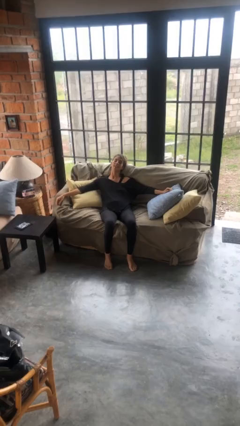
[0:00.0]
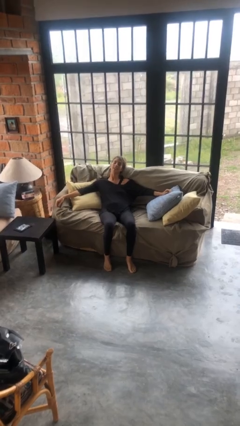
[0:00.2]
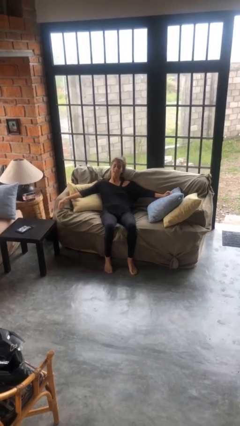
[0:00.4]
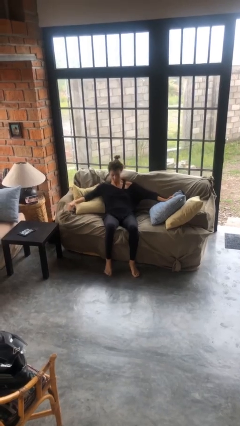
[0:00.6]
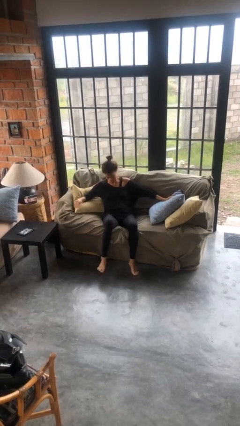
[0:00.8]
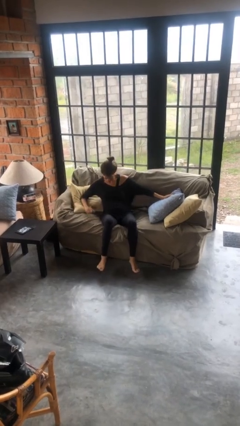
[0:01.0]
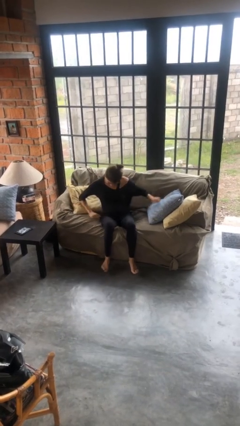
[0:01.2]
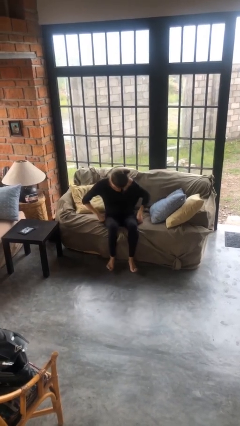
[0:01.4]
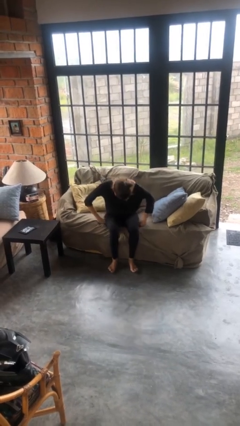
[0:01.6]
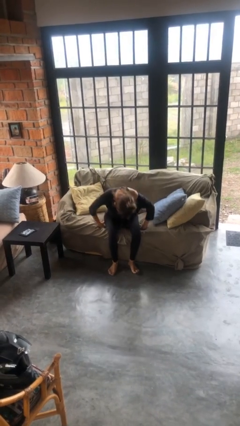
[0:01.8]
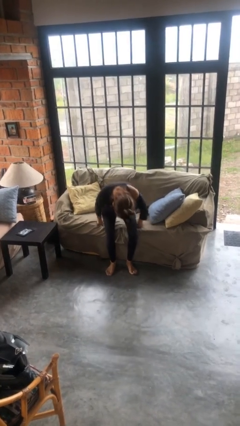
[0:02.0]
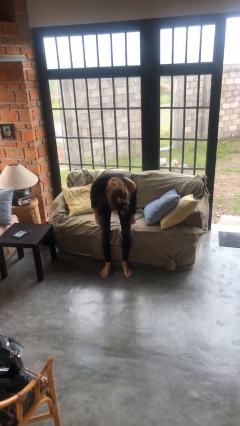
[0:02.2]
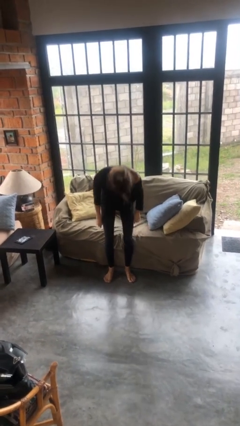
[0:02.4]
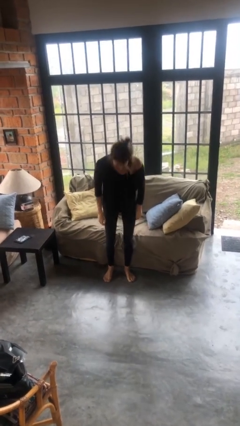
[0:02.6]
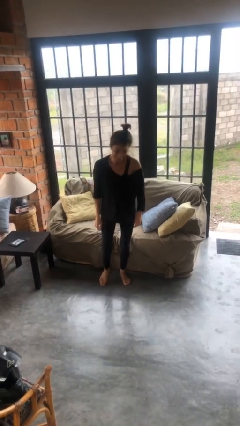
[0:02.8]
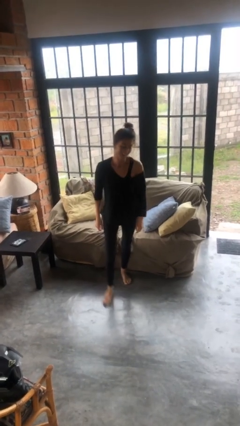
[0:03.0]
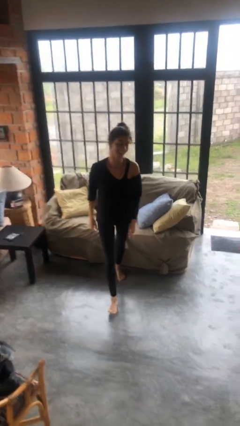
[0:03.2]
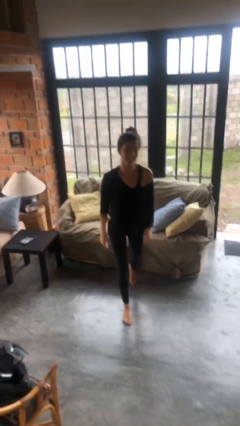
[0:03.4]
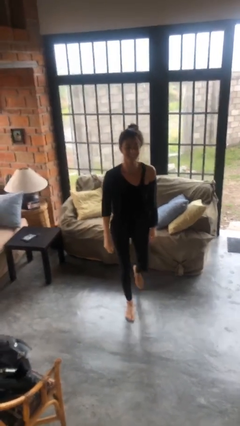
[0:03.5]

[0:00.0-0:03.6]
person stands up

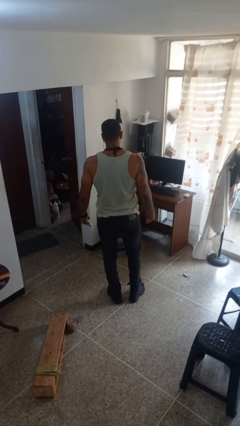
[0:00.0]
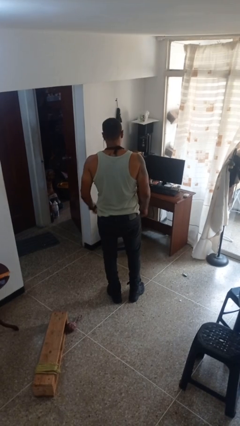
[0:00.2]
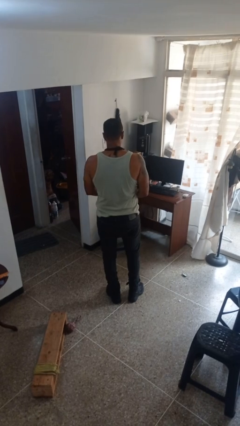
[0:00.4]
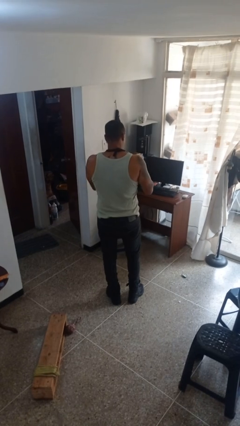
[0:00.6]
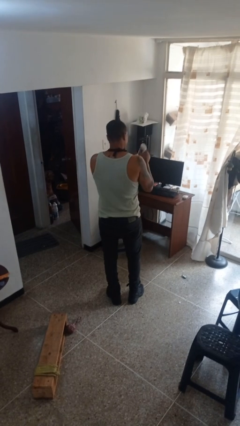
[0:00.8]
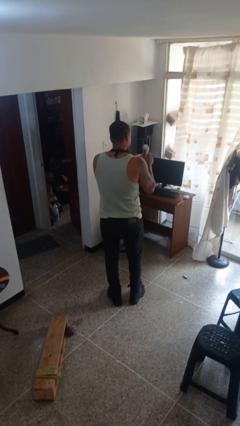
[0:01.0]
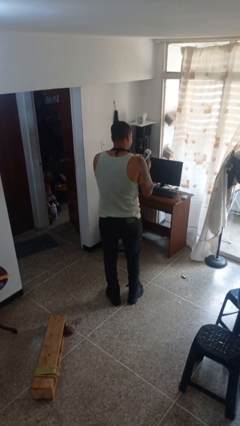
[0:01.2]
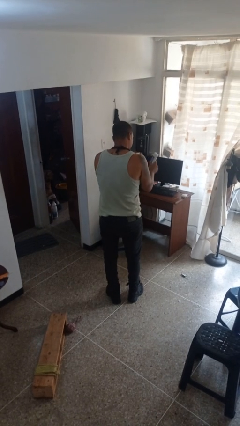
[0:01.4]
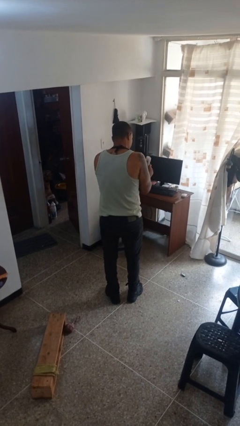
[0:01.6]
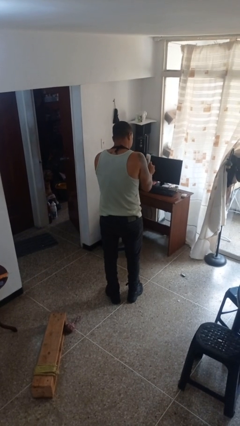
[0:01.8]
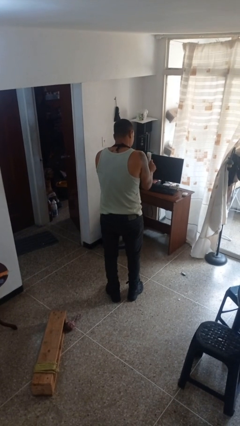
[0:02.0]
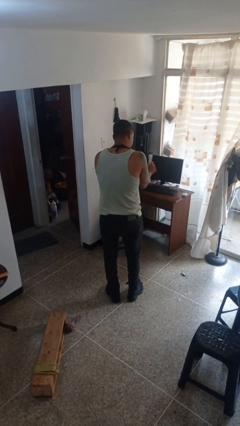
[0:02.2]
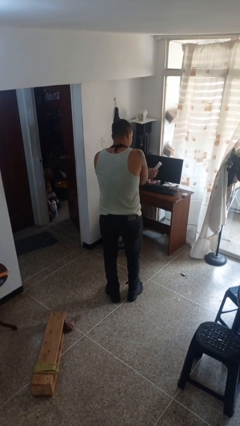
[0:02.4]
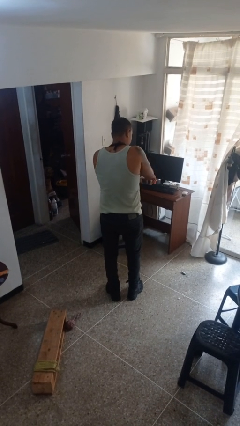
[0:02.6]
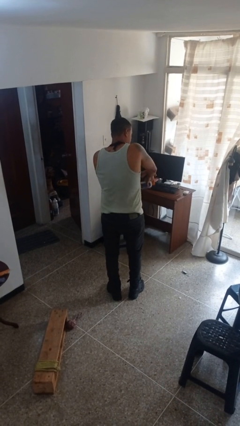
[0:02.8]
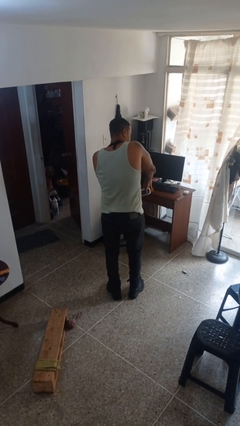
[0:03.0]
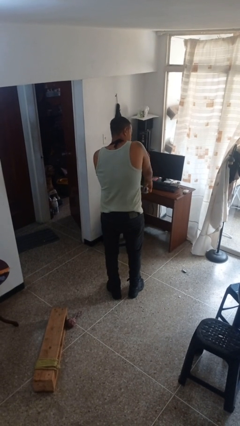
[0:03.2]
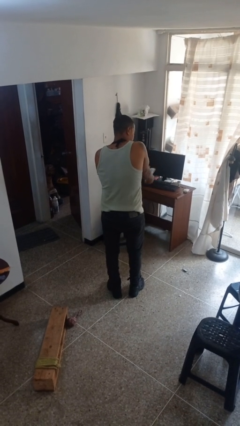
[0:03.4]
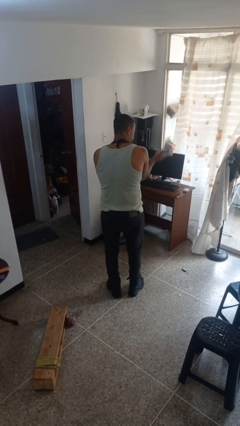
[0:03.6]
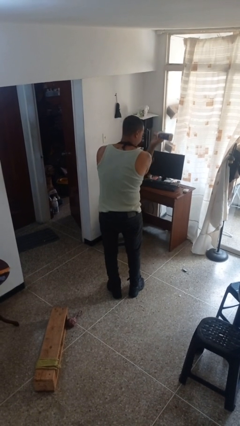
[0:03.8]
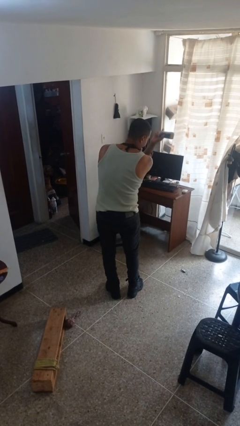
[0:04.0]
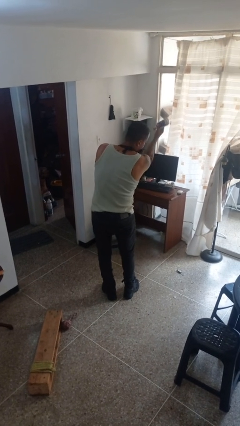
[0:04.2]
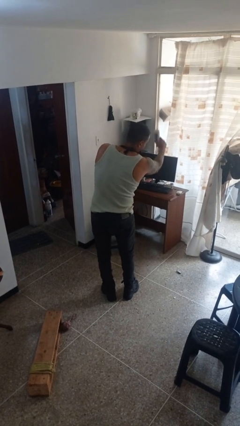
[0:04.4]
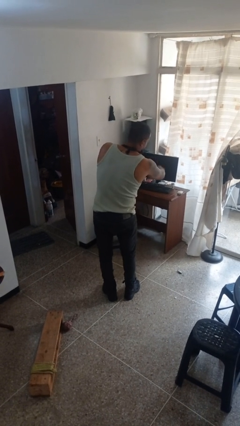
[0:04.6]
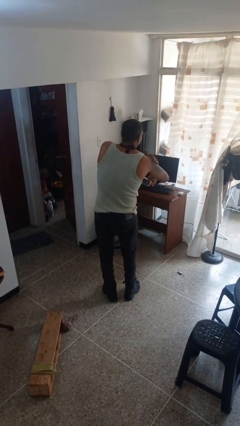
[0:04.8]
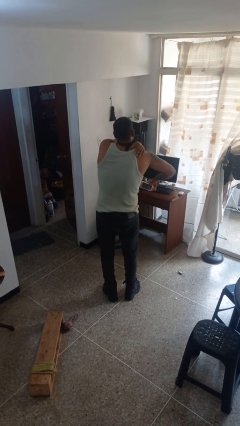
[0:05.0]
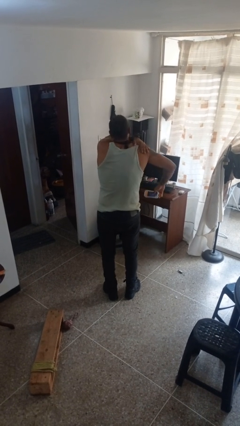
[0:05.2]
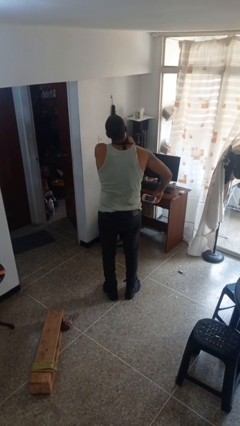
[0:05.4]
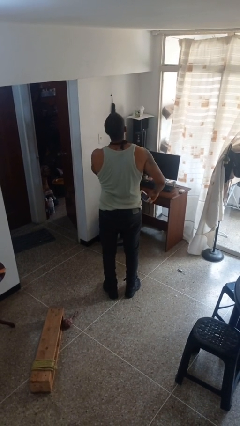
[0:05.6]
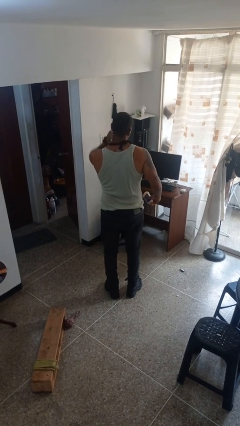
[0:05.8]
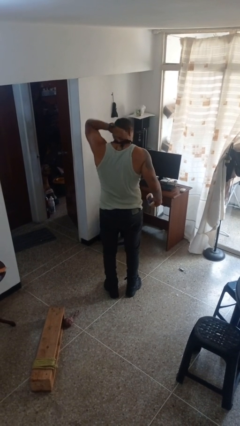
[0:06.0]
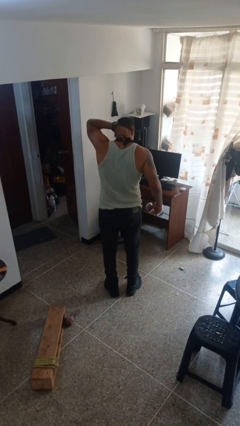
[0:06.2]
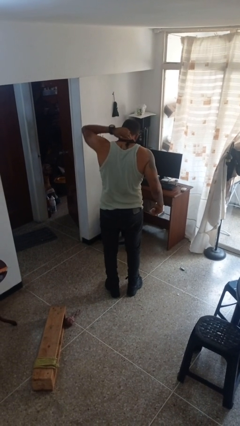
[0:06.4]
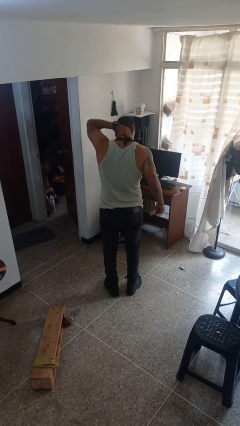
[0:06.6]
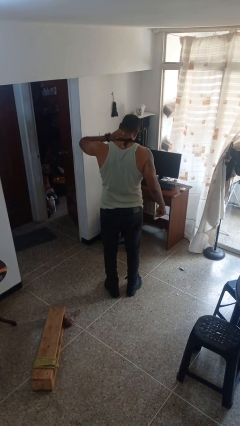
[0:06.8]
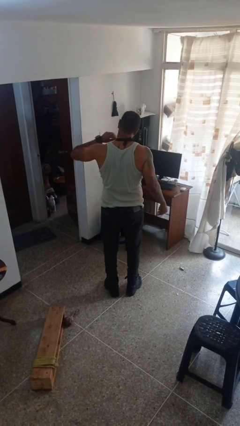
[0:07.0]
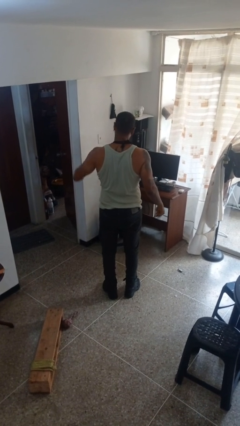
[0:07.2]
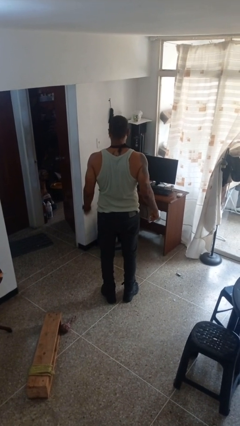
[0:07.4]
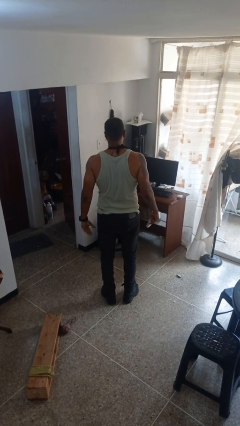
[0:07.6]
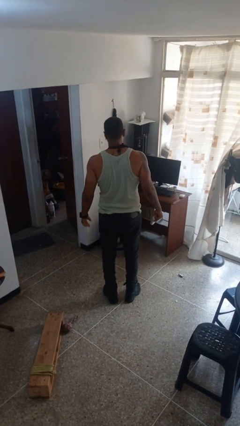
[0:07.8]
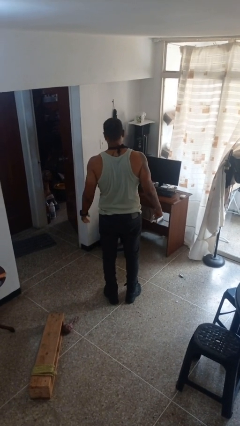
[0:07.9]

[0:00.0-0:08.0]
person applies sunscreen

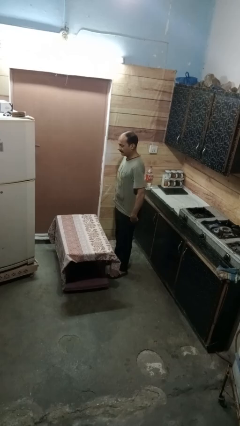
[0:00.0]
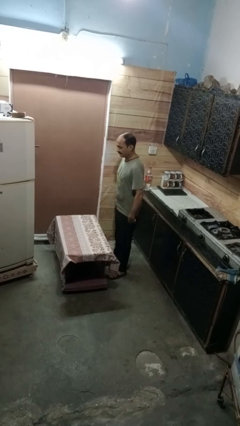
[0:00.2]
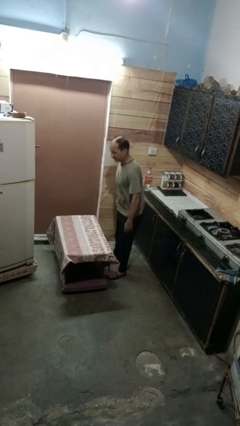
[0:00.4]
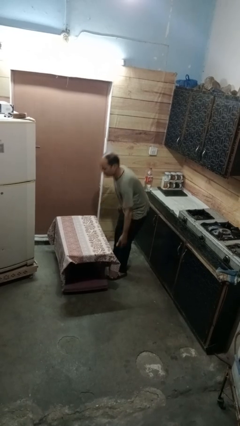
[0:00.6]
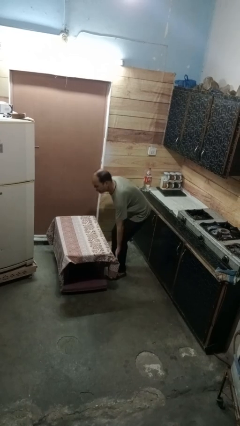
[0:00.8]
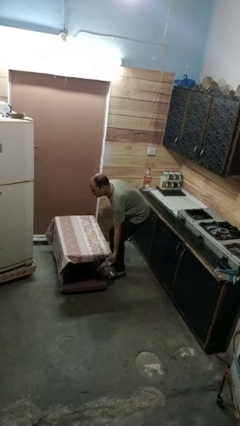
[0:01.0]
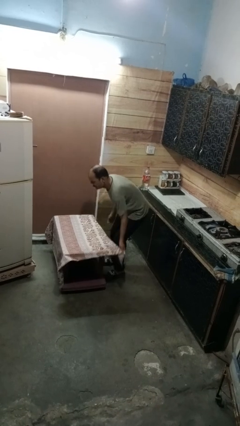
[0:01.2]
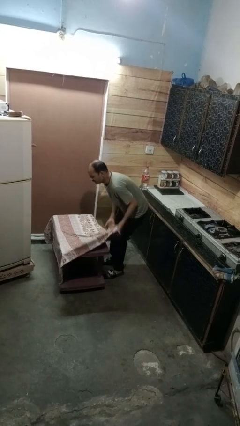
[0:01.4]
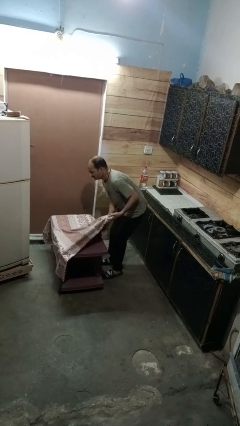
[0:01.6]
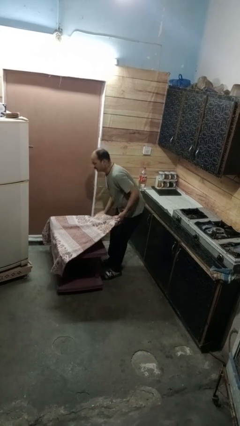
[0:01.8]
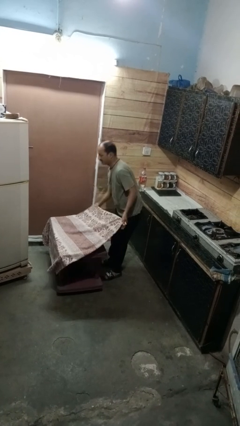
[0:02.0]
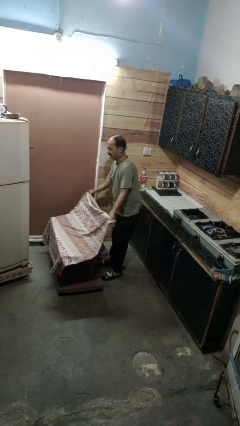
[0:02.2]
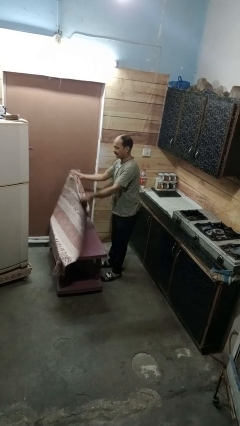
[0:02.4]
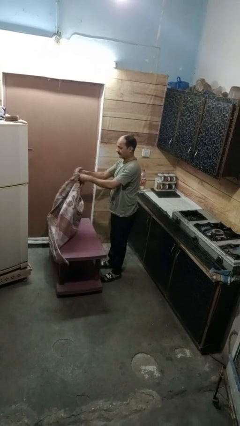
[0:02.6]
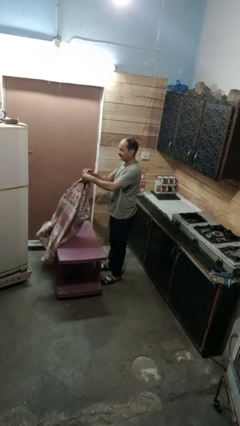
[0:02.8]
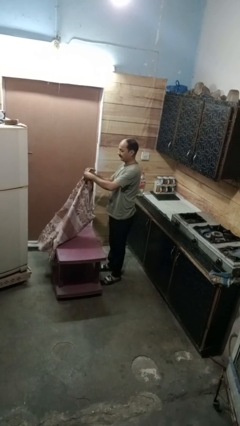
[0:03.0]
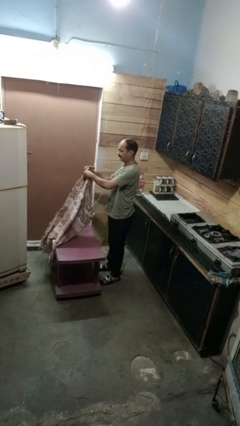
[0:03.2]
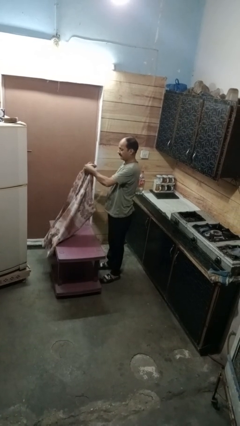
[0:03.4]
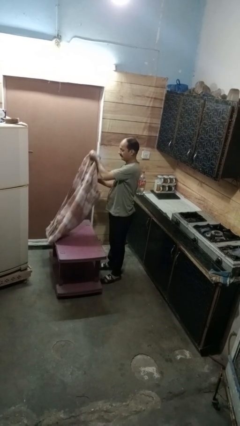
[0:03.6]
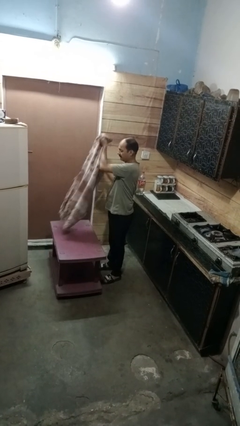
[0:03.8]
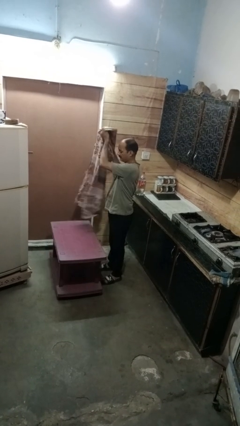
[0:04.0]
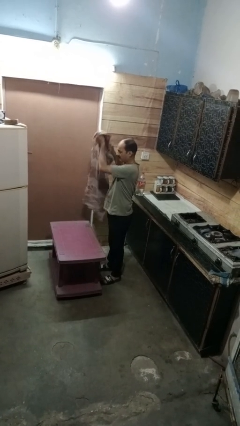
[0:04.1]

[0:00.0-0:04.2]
person folds tablecloth

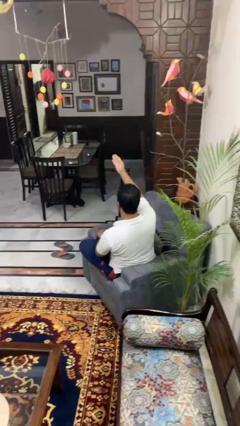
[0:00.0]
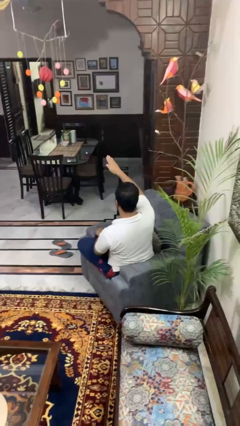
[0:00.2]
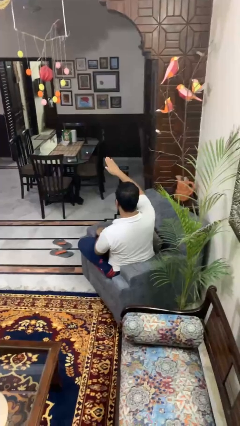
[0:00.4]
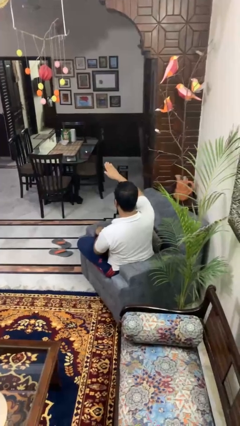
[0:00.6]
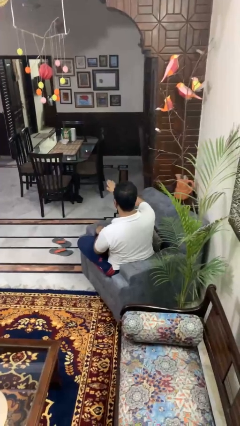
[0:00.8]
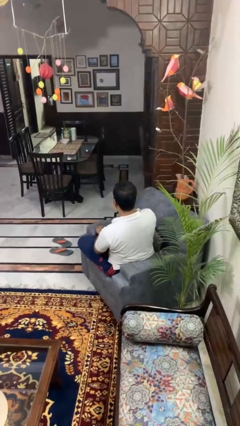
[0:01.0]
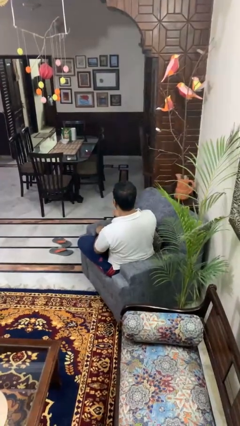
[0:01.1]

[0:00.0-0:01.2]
person gestures swipe down

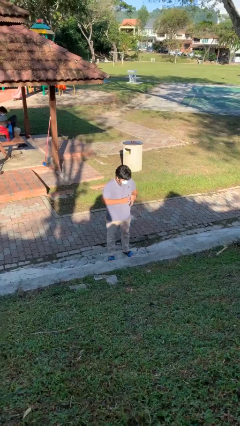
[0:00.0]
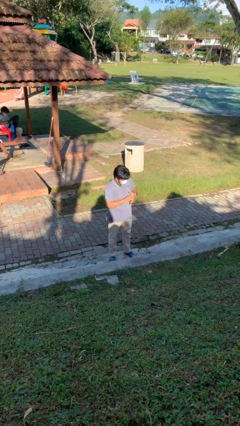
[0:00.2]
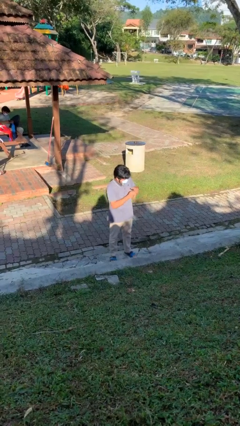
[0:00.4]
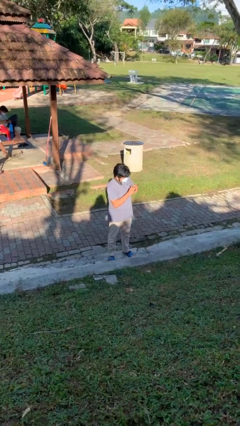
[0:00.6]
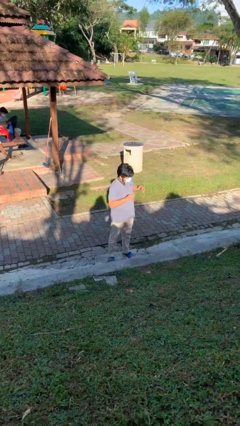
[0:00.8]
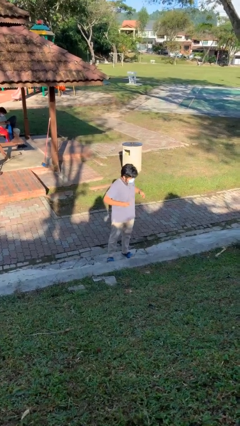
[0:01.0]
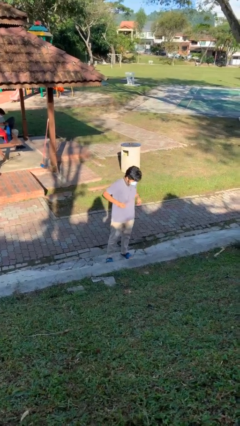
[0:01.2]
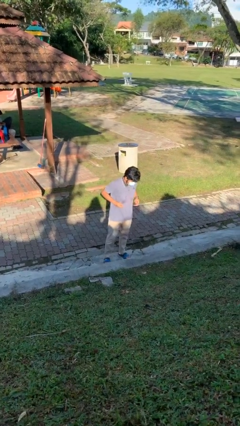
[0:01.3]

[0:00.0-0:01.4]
person takes off ring
